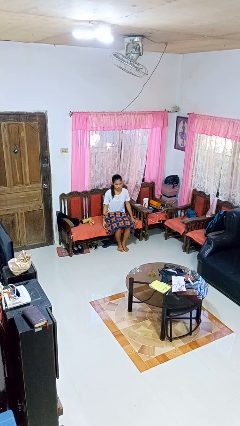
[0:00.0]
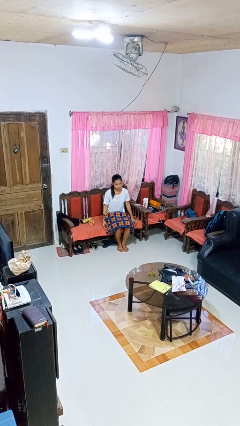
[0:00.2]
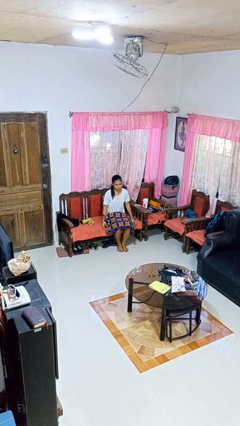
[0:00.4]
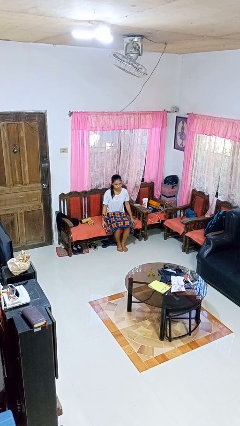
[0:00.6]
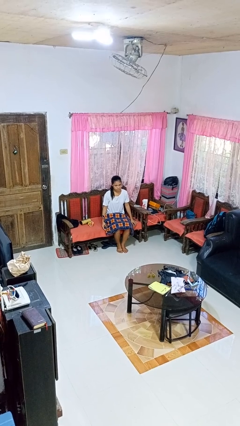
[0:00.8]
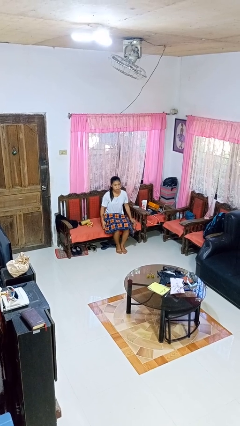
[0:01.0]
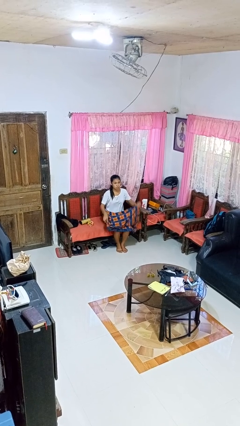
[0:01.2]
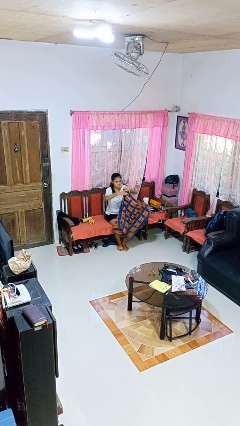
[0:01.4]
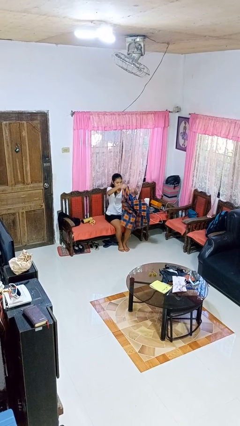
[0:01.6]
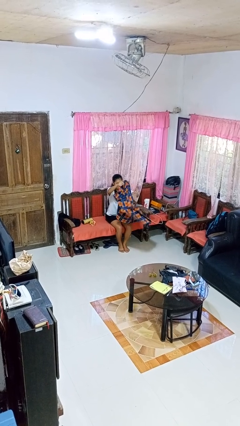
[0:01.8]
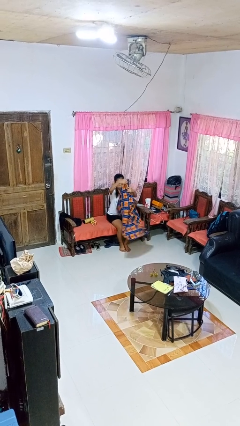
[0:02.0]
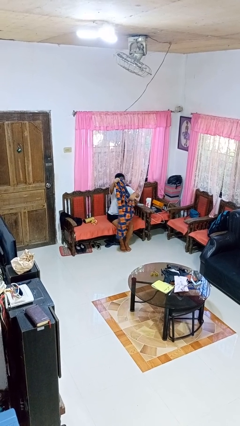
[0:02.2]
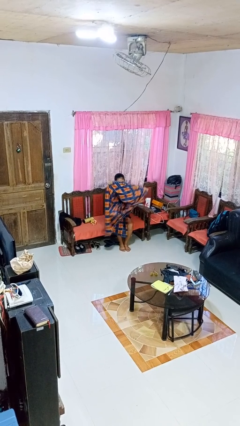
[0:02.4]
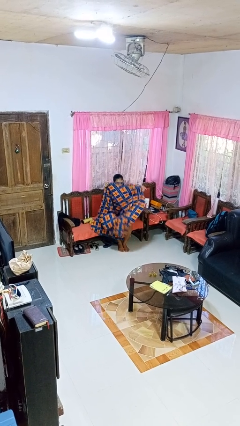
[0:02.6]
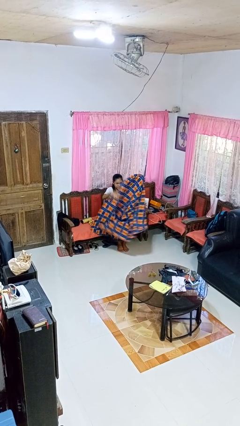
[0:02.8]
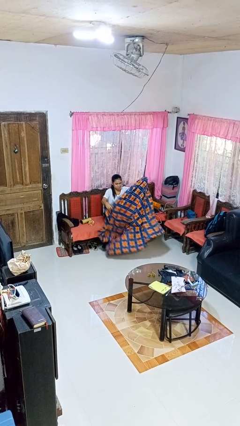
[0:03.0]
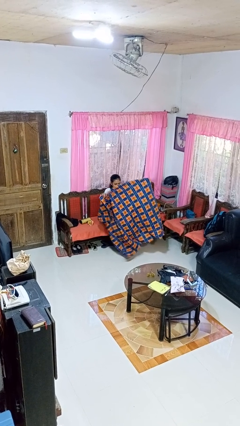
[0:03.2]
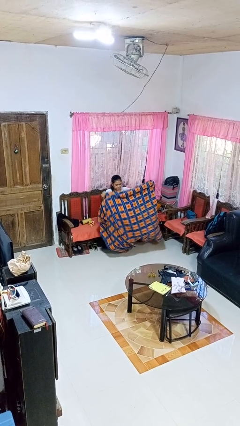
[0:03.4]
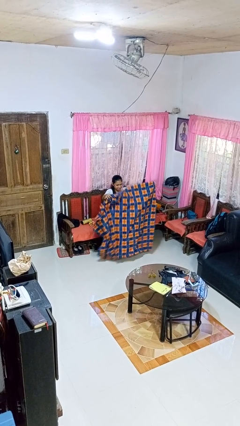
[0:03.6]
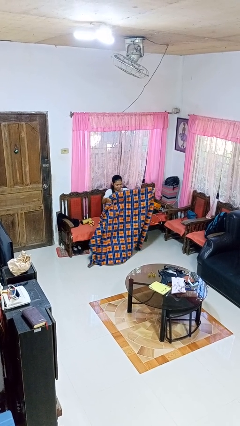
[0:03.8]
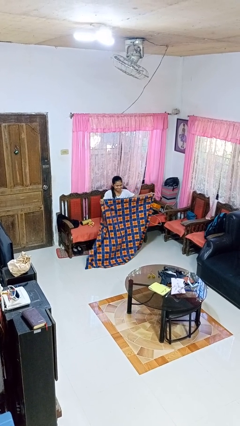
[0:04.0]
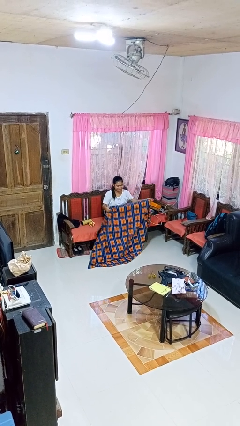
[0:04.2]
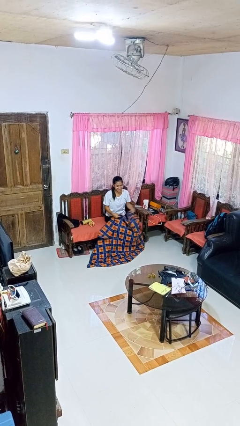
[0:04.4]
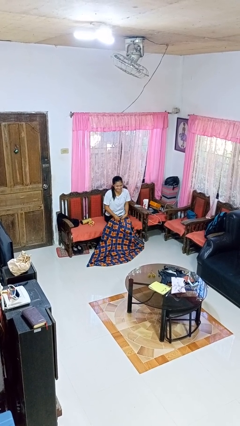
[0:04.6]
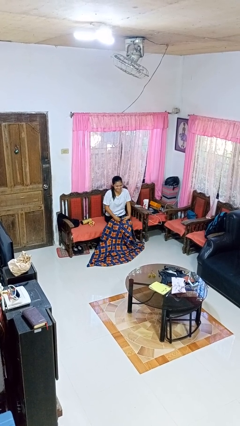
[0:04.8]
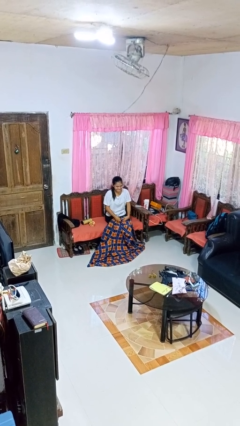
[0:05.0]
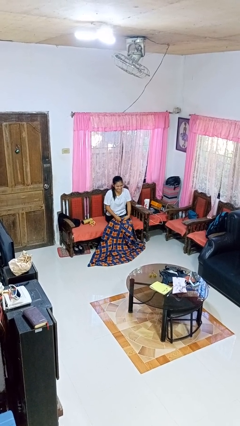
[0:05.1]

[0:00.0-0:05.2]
person unfolds blanket

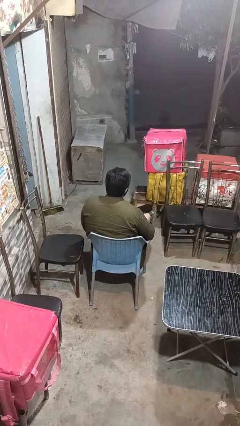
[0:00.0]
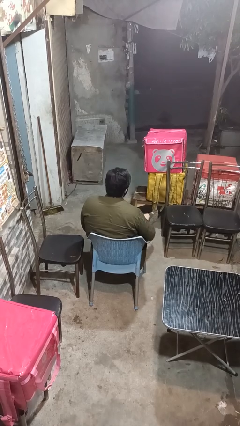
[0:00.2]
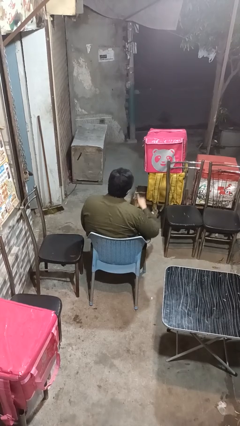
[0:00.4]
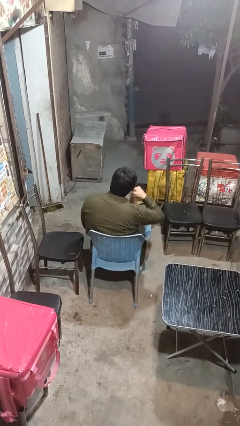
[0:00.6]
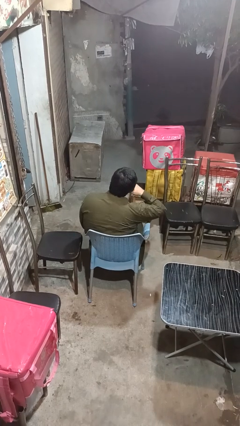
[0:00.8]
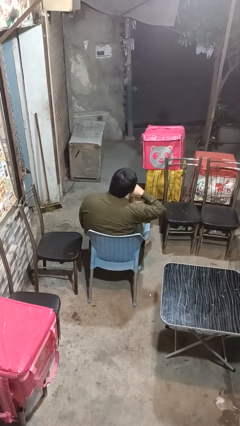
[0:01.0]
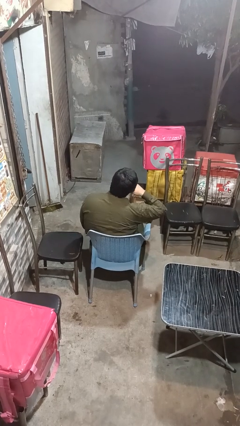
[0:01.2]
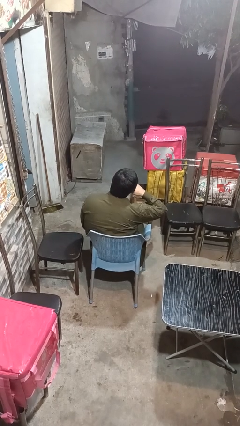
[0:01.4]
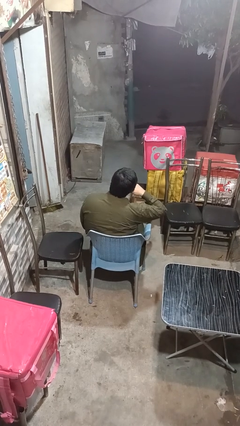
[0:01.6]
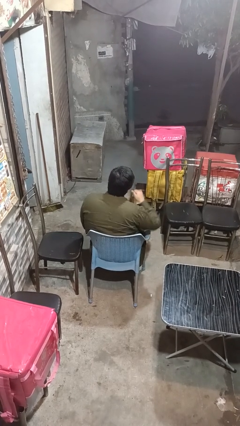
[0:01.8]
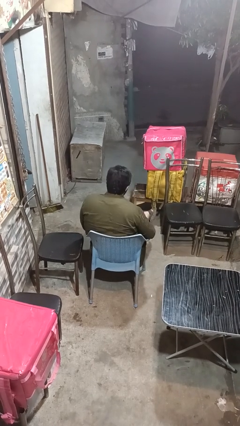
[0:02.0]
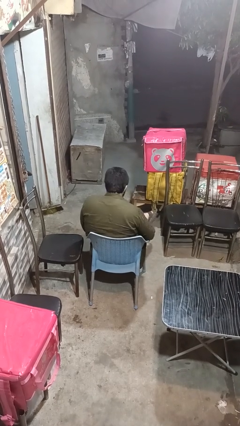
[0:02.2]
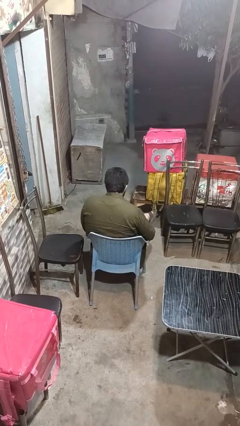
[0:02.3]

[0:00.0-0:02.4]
person gestures call me

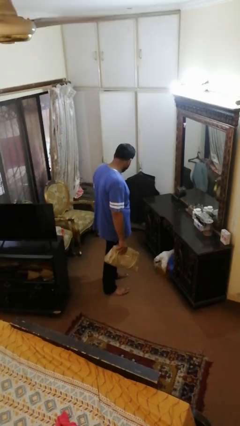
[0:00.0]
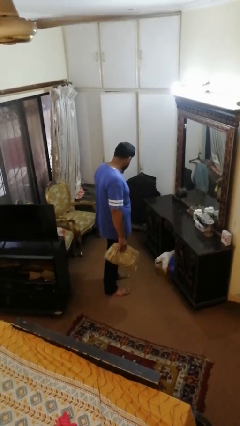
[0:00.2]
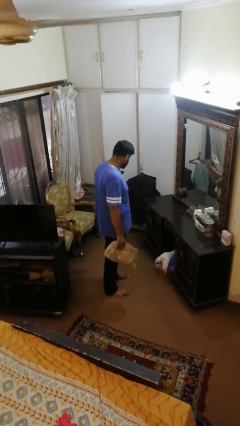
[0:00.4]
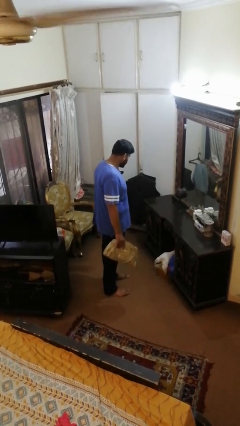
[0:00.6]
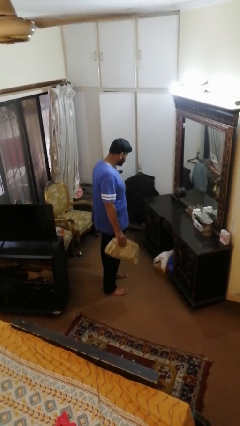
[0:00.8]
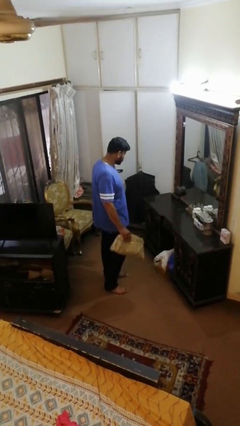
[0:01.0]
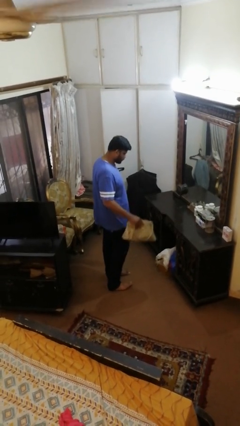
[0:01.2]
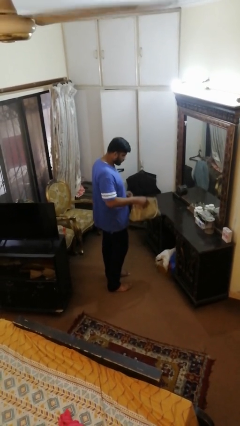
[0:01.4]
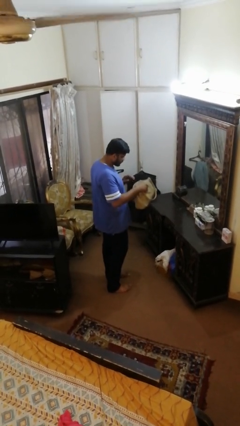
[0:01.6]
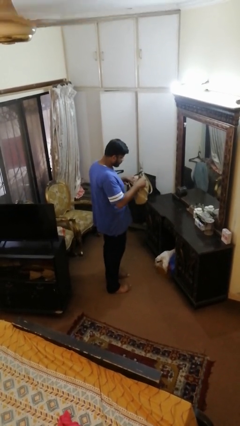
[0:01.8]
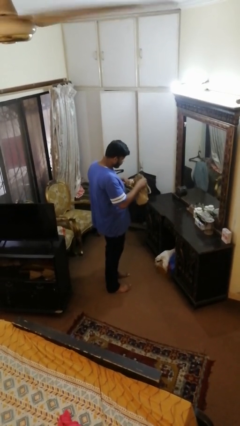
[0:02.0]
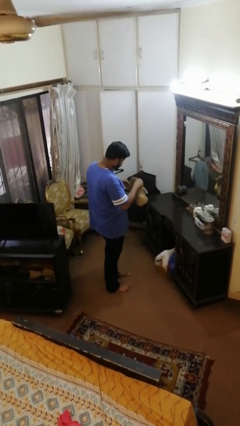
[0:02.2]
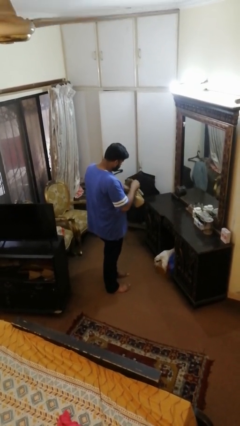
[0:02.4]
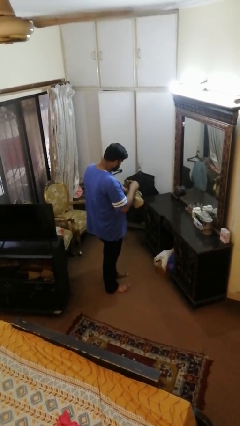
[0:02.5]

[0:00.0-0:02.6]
person searches in purse

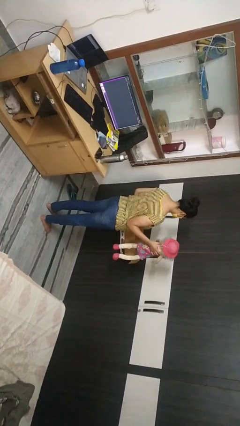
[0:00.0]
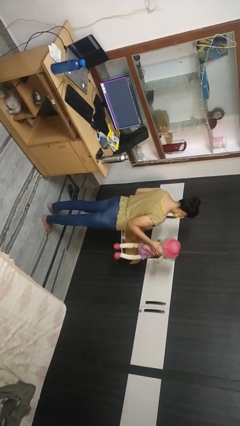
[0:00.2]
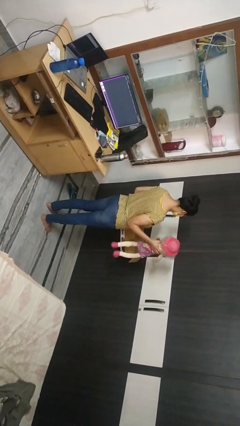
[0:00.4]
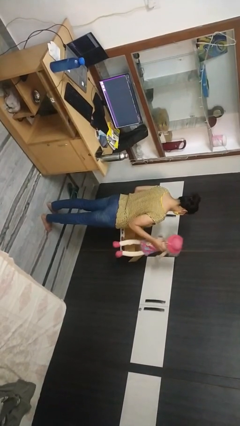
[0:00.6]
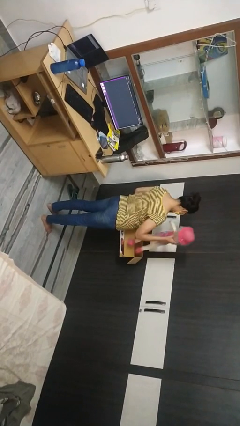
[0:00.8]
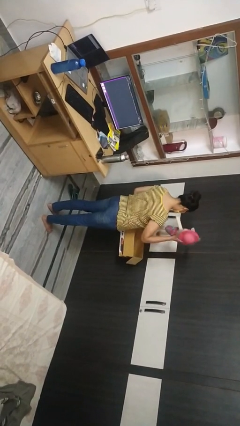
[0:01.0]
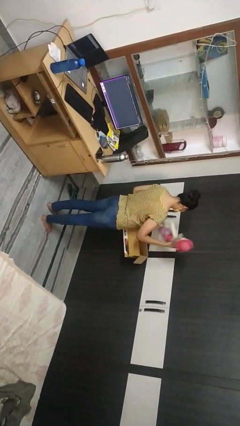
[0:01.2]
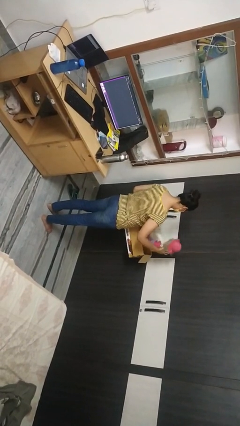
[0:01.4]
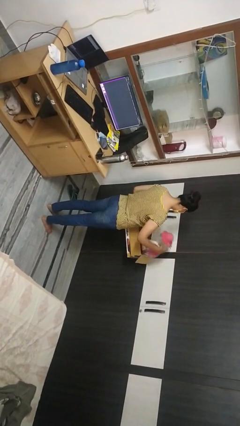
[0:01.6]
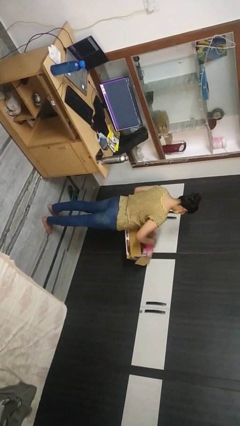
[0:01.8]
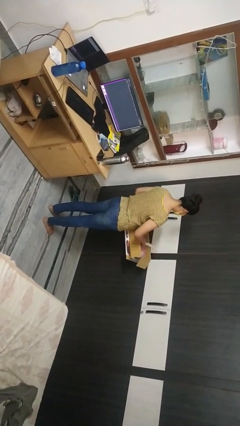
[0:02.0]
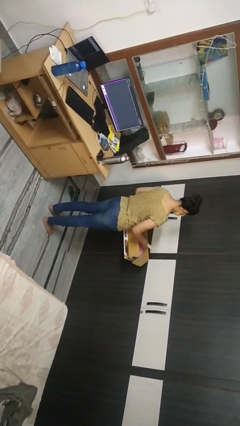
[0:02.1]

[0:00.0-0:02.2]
person puts object into box

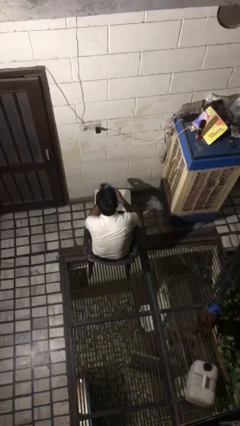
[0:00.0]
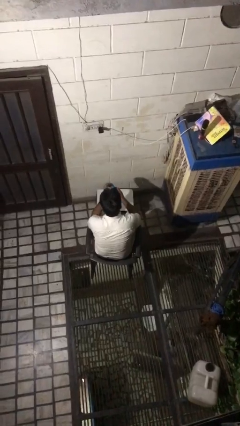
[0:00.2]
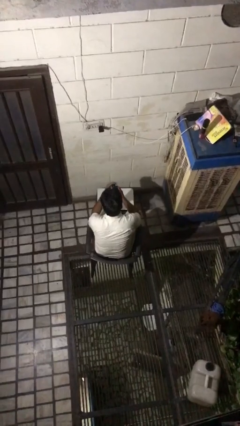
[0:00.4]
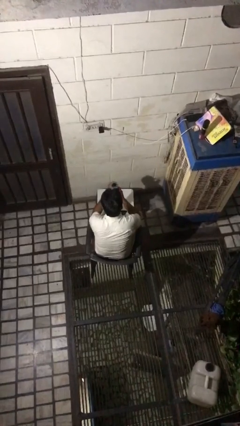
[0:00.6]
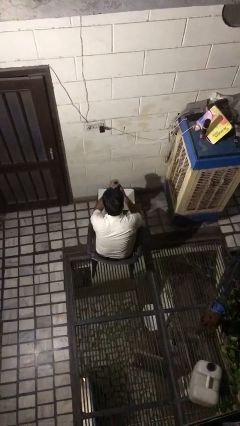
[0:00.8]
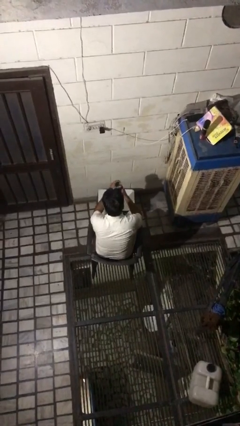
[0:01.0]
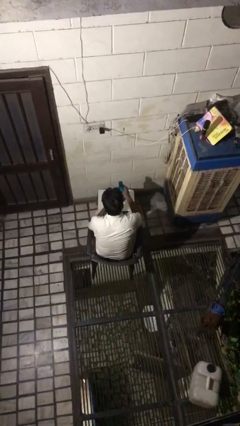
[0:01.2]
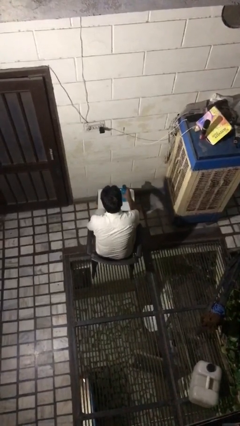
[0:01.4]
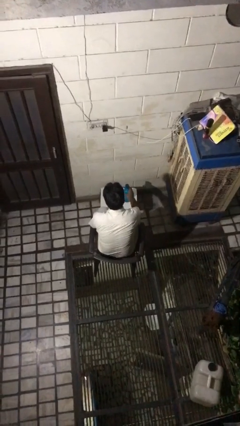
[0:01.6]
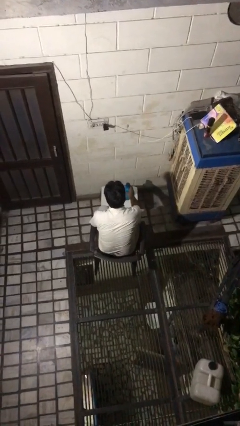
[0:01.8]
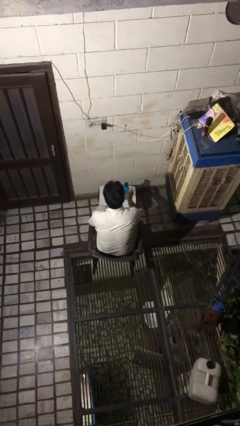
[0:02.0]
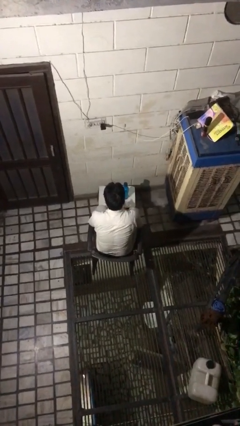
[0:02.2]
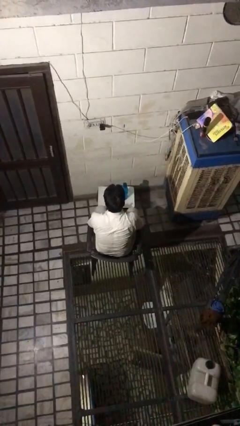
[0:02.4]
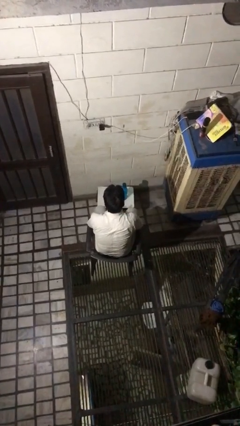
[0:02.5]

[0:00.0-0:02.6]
person screws lid to bottle

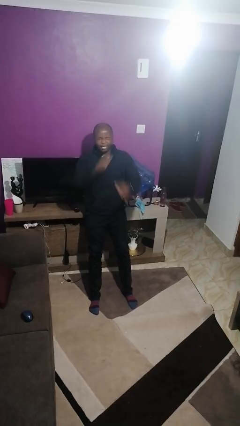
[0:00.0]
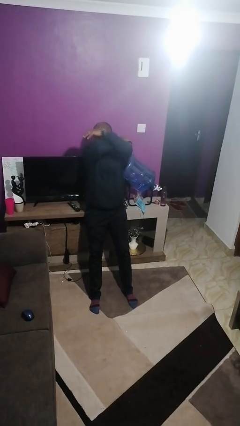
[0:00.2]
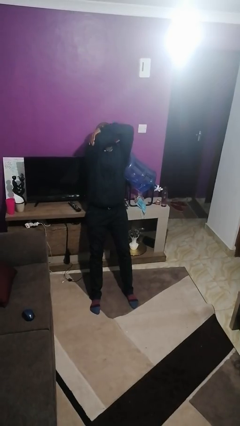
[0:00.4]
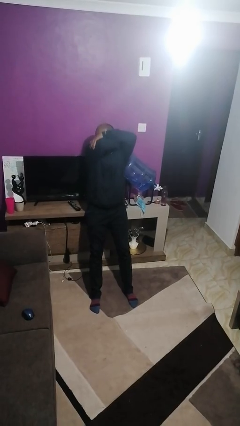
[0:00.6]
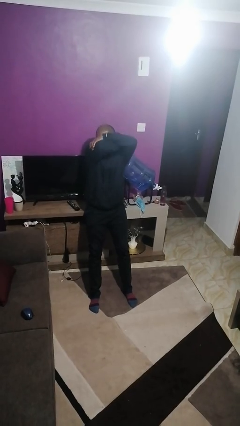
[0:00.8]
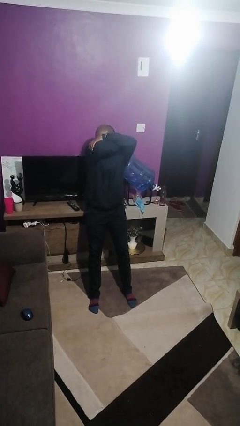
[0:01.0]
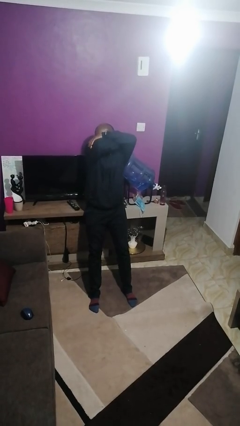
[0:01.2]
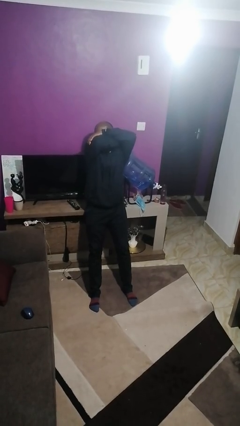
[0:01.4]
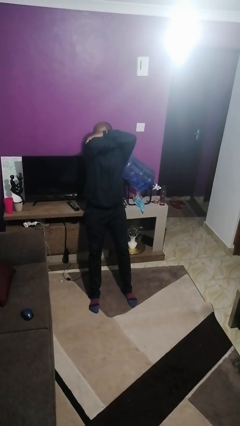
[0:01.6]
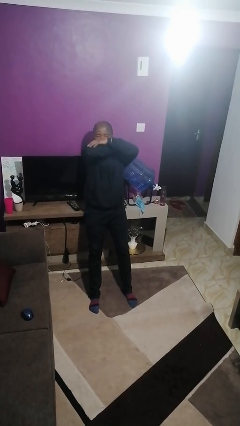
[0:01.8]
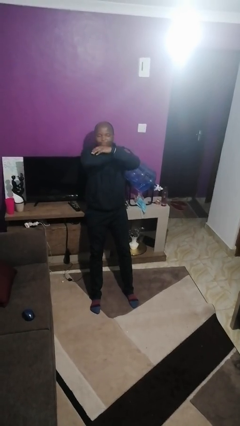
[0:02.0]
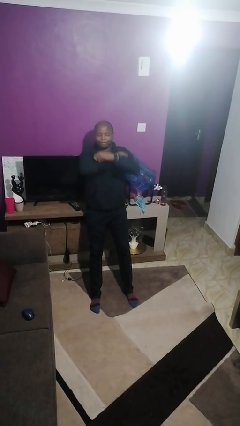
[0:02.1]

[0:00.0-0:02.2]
person sneezes into hand
